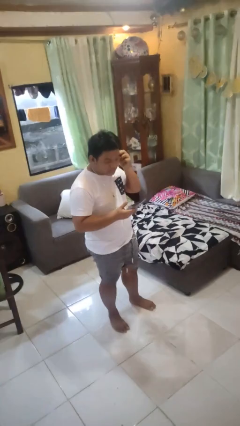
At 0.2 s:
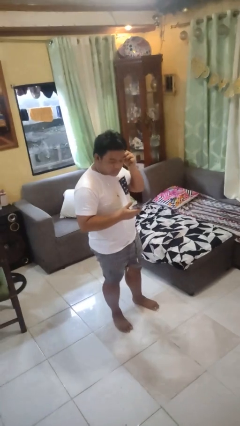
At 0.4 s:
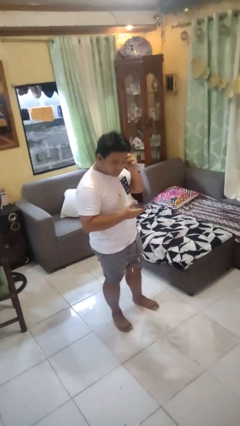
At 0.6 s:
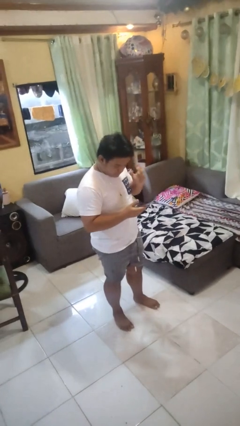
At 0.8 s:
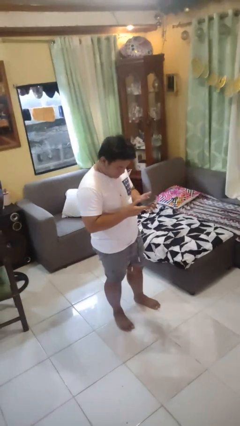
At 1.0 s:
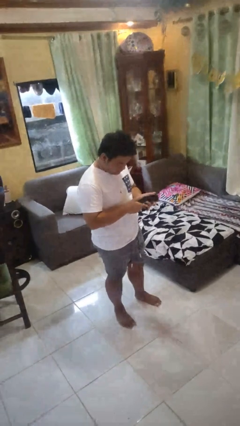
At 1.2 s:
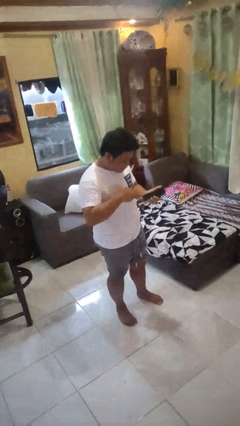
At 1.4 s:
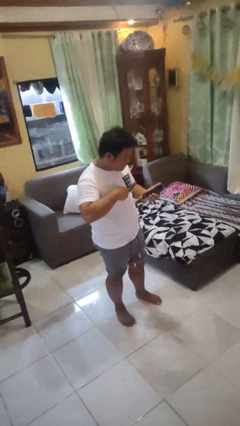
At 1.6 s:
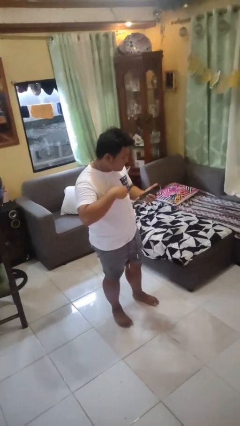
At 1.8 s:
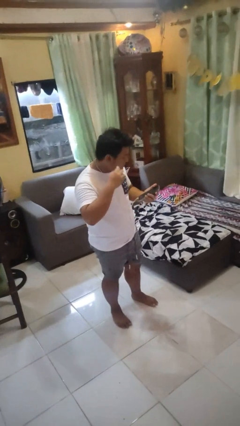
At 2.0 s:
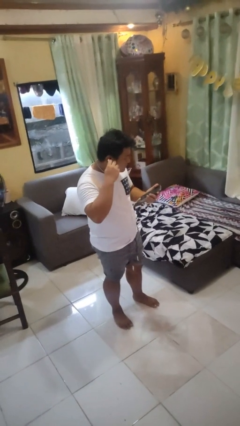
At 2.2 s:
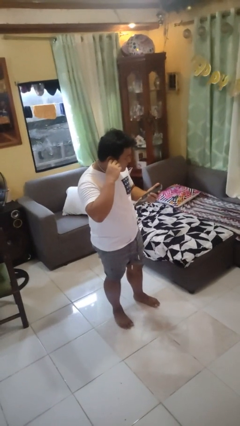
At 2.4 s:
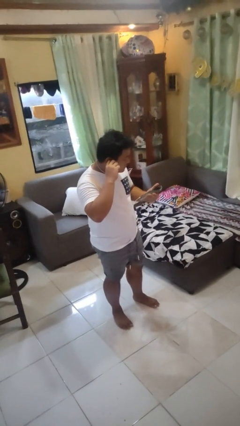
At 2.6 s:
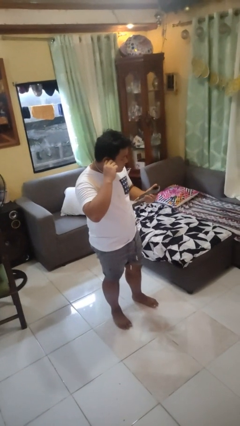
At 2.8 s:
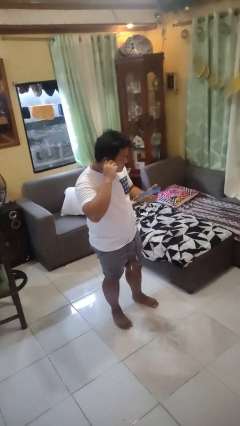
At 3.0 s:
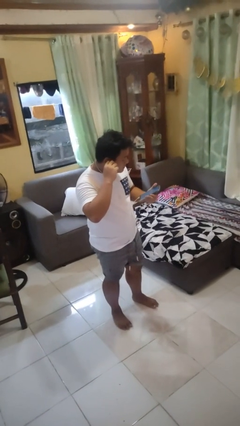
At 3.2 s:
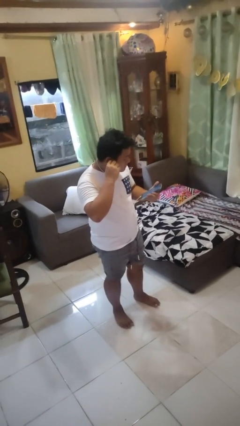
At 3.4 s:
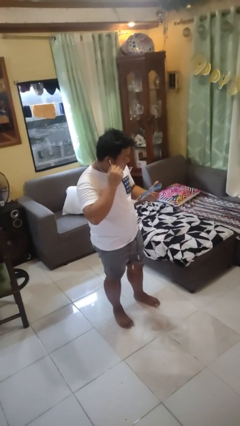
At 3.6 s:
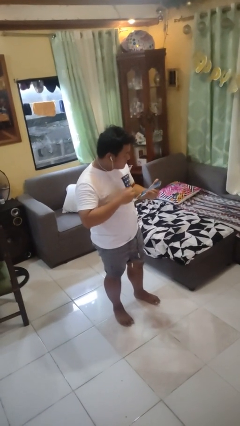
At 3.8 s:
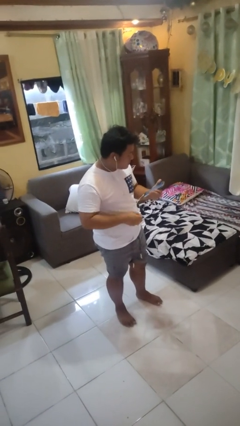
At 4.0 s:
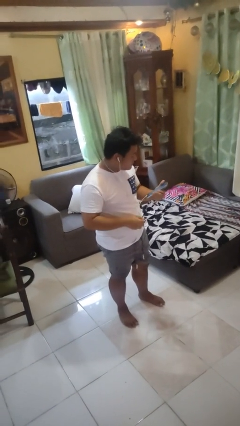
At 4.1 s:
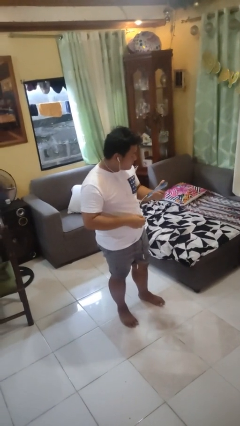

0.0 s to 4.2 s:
person puts on headphones

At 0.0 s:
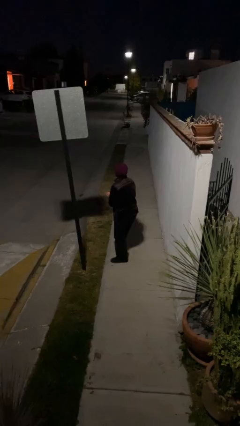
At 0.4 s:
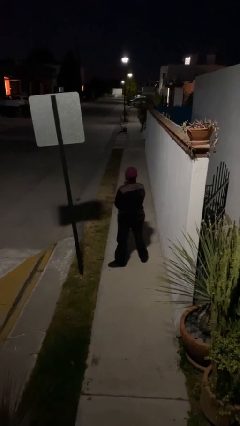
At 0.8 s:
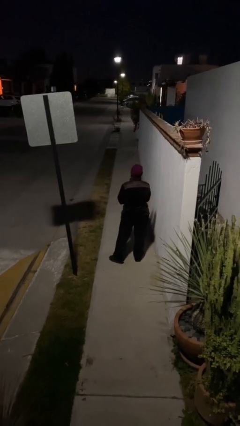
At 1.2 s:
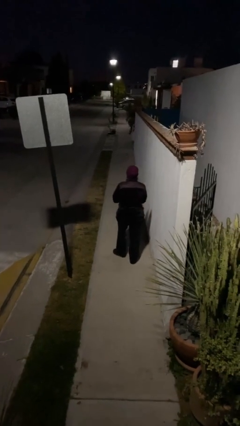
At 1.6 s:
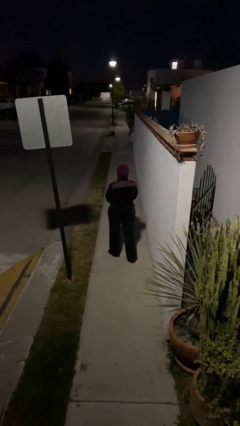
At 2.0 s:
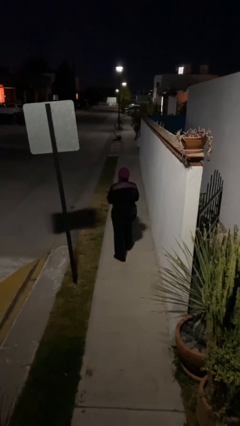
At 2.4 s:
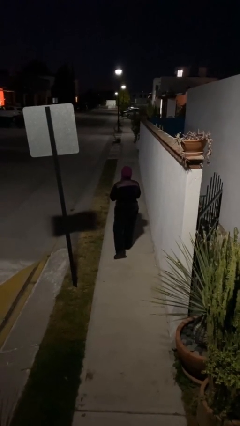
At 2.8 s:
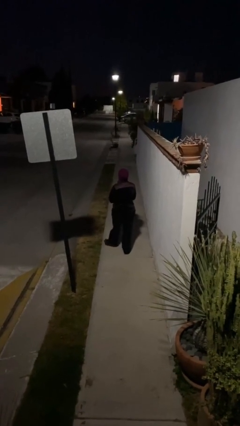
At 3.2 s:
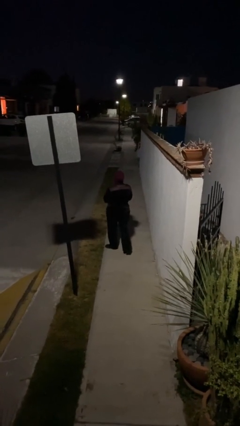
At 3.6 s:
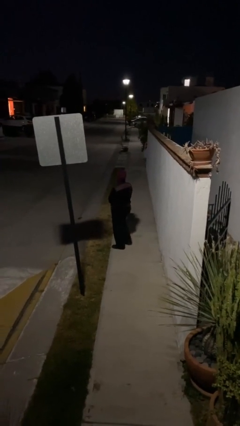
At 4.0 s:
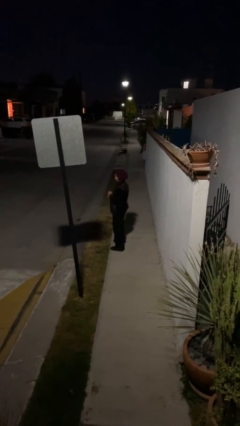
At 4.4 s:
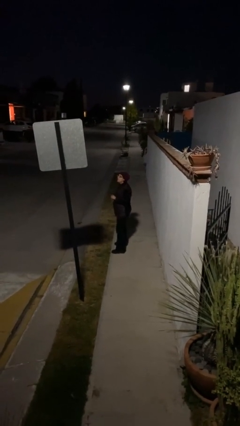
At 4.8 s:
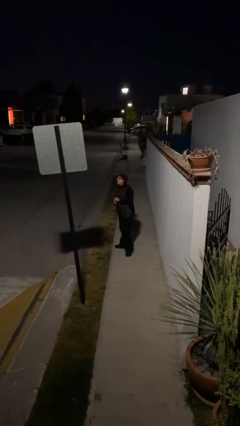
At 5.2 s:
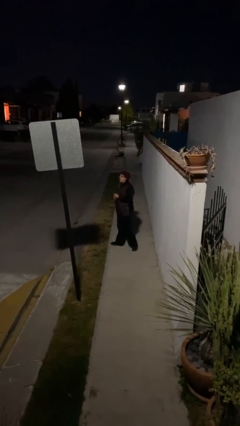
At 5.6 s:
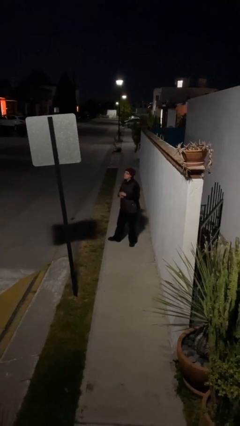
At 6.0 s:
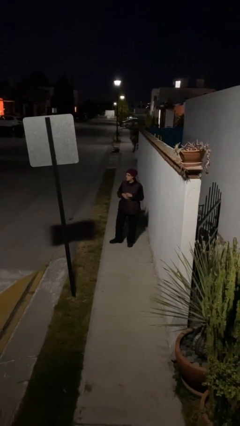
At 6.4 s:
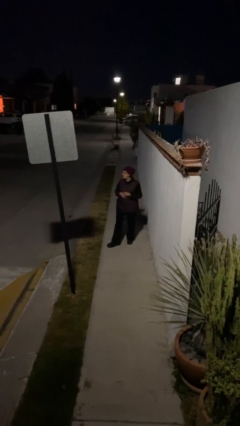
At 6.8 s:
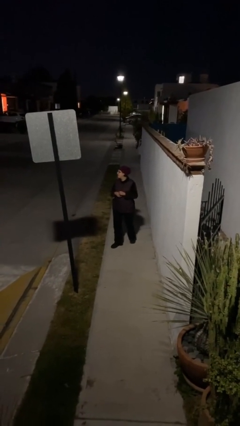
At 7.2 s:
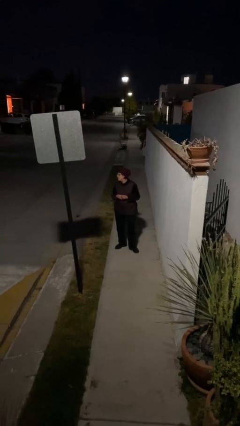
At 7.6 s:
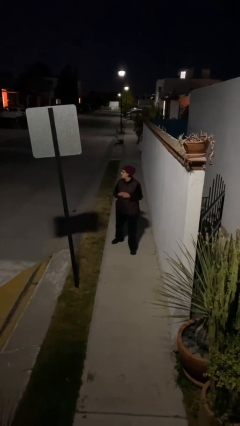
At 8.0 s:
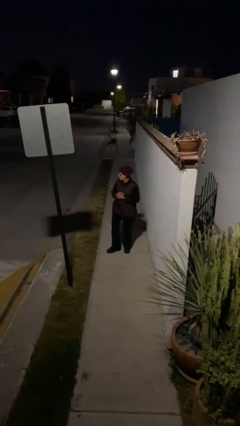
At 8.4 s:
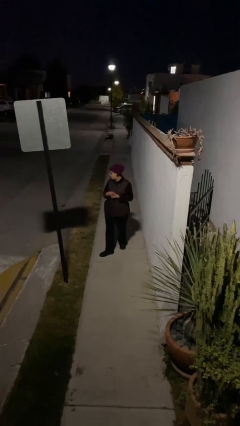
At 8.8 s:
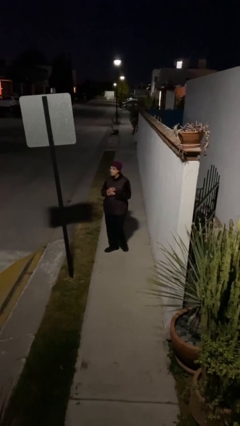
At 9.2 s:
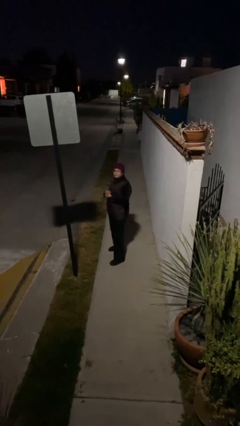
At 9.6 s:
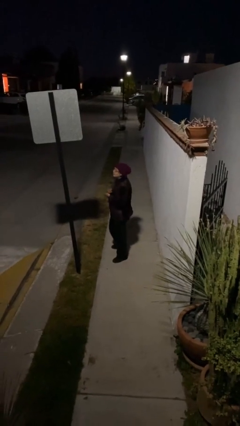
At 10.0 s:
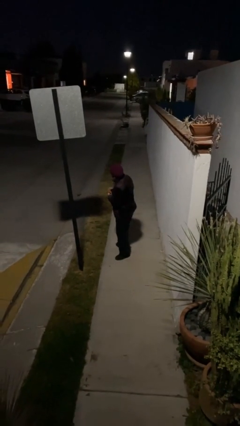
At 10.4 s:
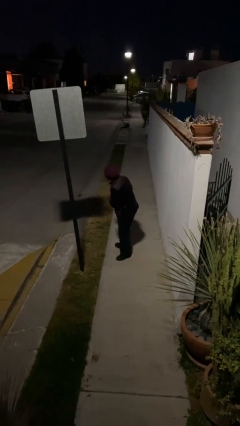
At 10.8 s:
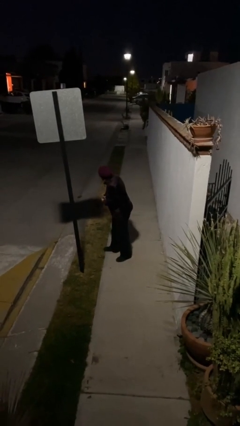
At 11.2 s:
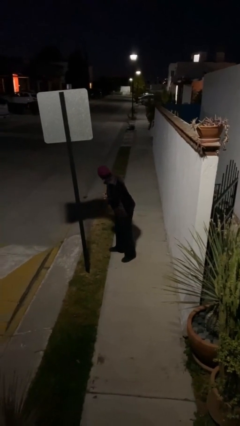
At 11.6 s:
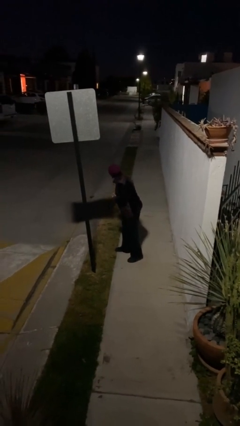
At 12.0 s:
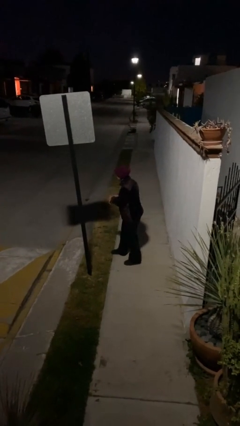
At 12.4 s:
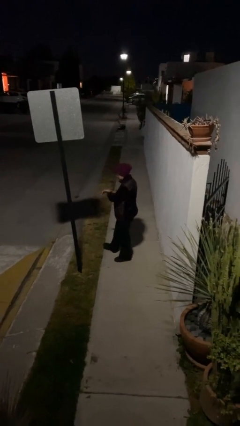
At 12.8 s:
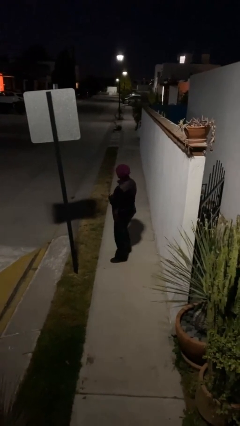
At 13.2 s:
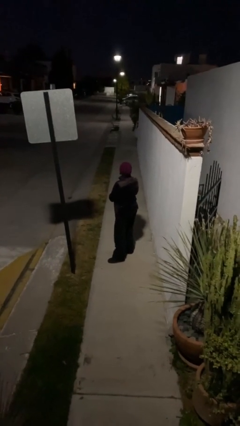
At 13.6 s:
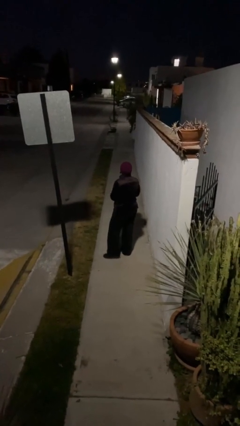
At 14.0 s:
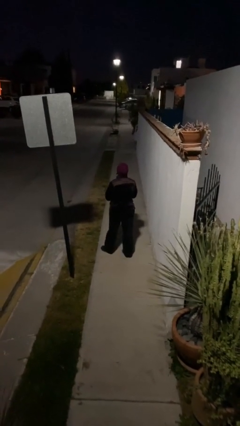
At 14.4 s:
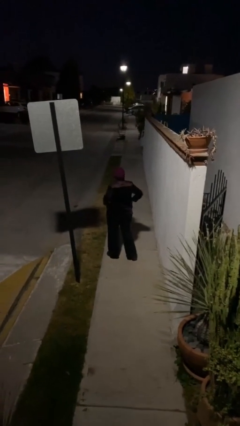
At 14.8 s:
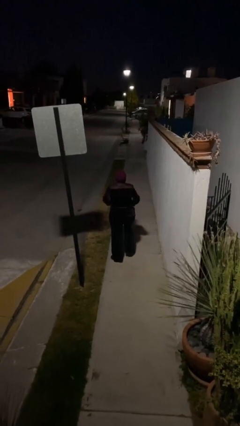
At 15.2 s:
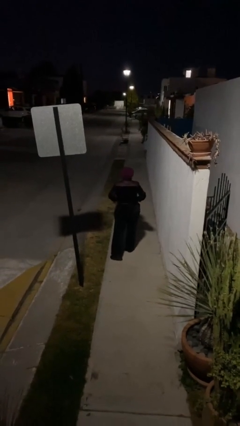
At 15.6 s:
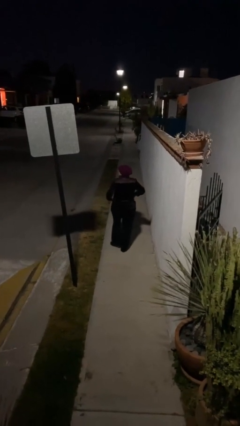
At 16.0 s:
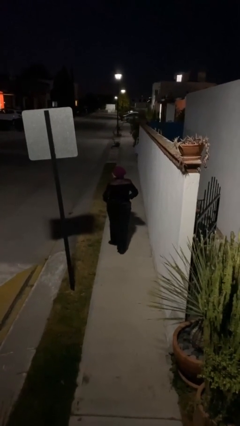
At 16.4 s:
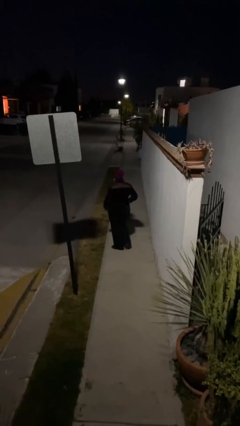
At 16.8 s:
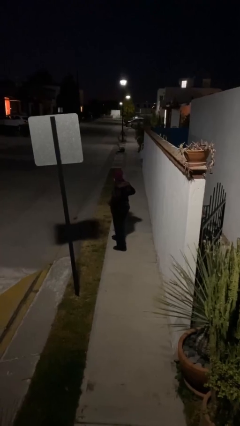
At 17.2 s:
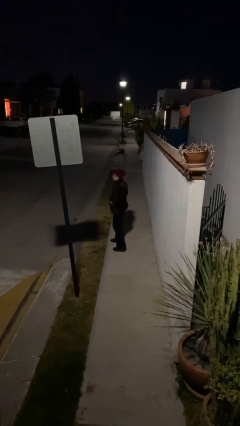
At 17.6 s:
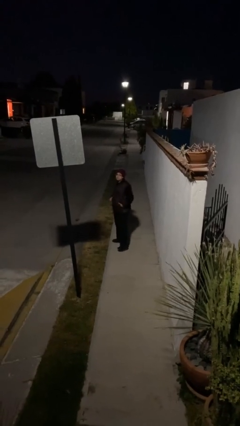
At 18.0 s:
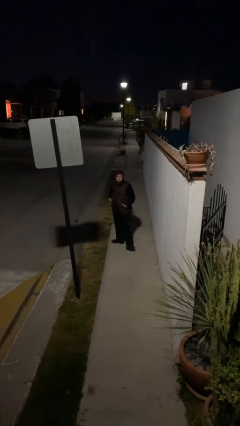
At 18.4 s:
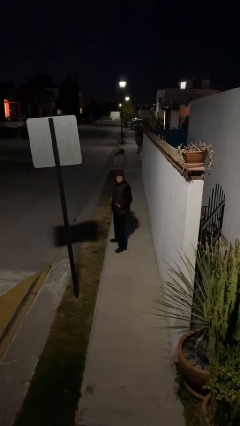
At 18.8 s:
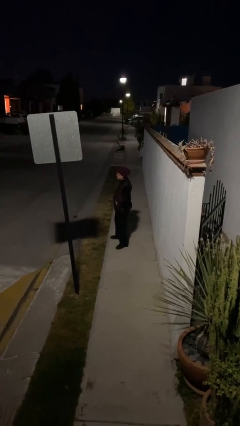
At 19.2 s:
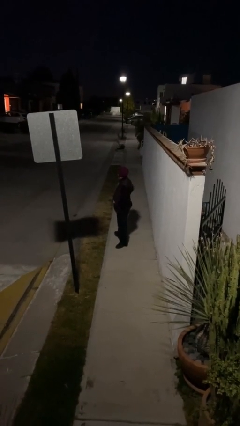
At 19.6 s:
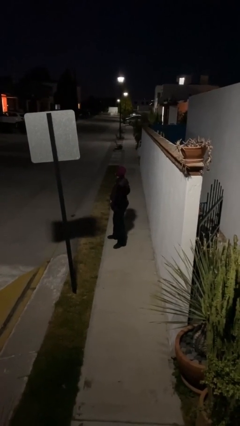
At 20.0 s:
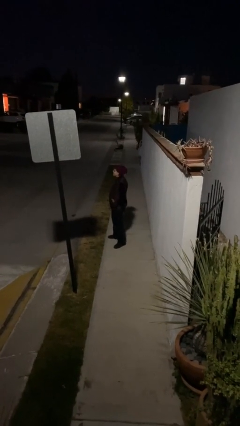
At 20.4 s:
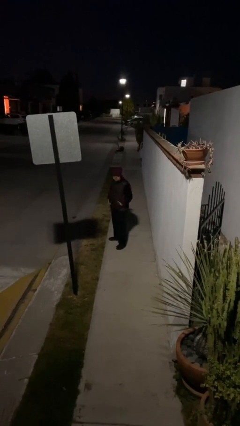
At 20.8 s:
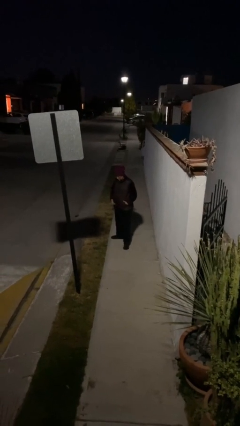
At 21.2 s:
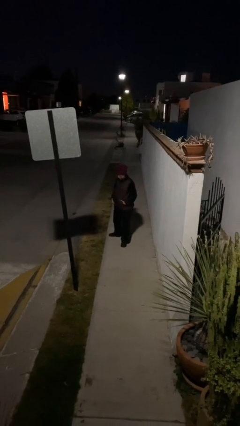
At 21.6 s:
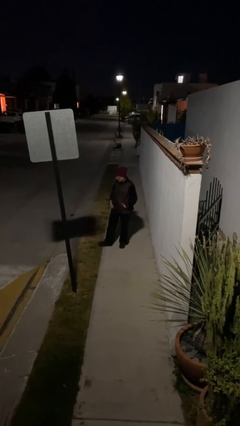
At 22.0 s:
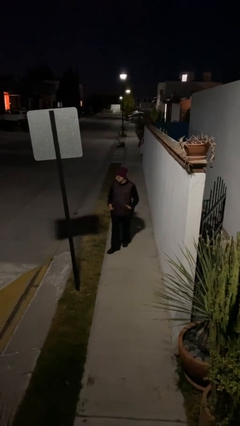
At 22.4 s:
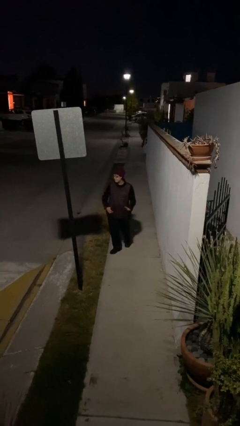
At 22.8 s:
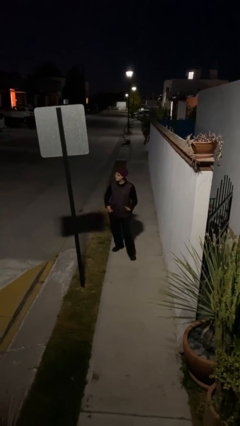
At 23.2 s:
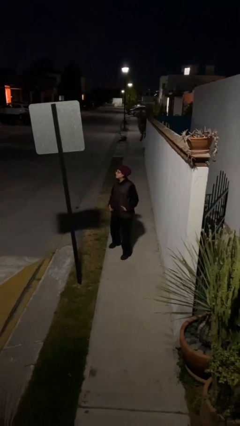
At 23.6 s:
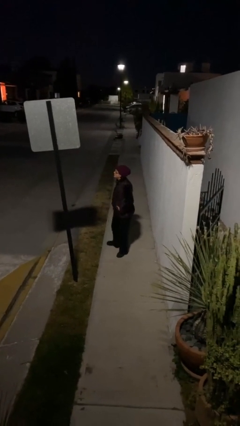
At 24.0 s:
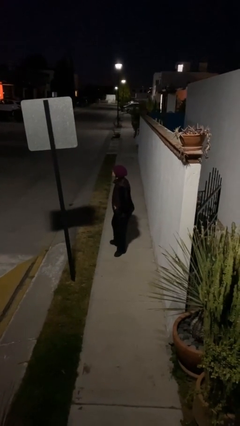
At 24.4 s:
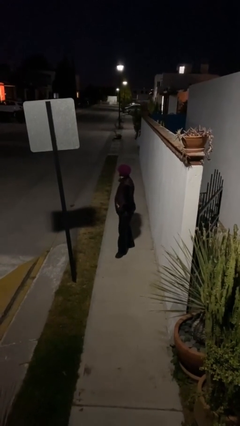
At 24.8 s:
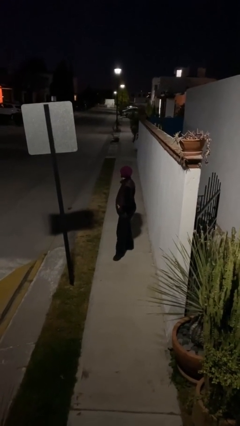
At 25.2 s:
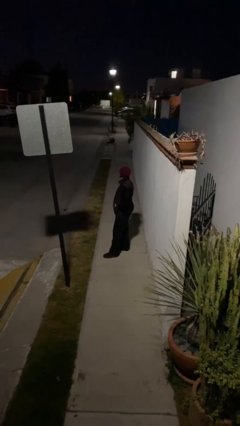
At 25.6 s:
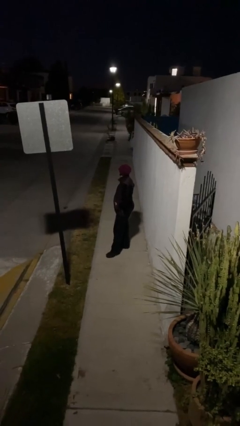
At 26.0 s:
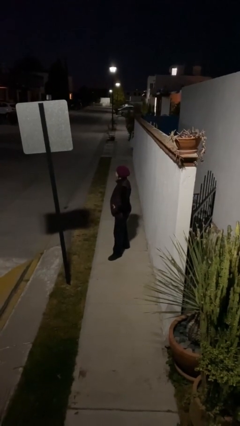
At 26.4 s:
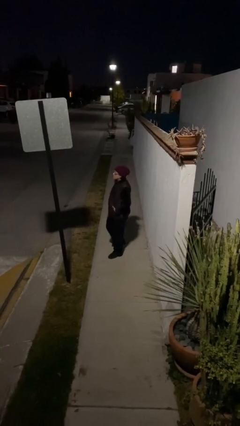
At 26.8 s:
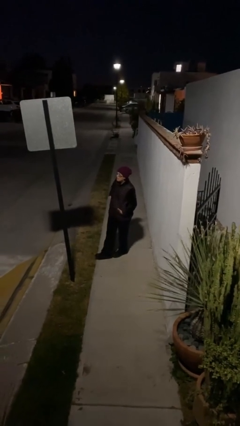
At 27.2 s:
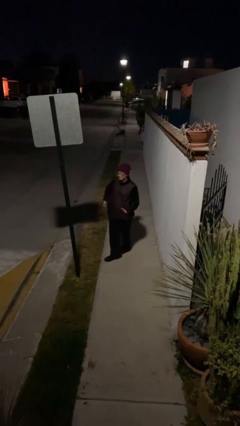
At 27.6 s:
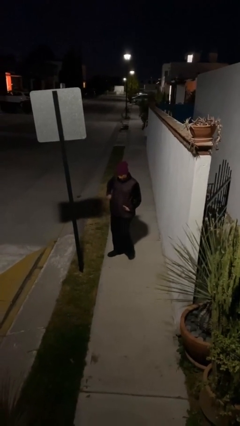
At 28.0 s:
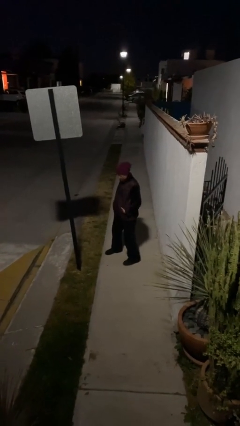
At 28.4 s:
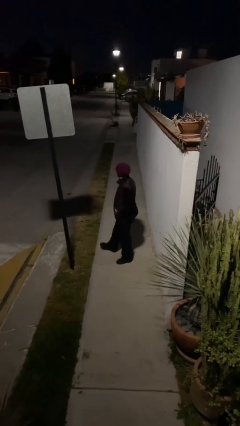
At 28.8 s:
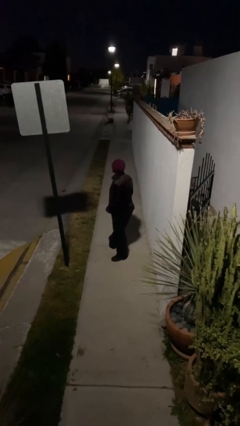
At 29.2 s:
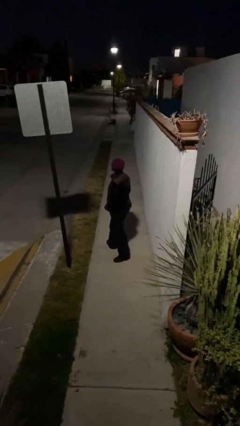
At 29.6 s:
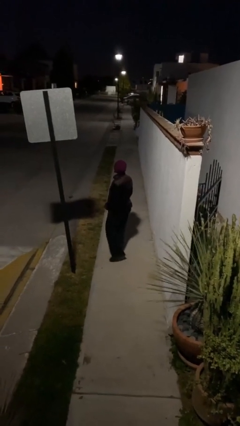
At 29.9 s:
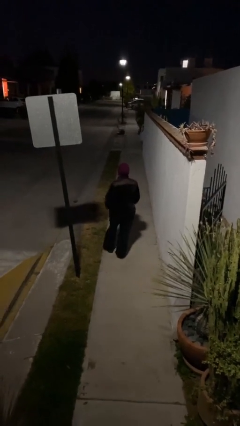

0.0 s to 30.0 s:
person walks
